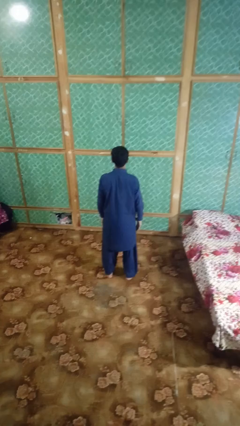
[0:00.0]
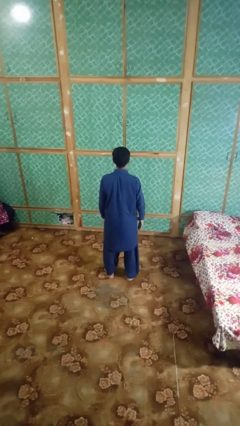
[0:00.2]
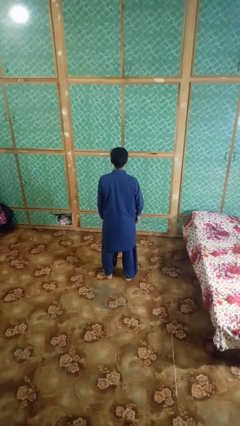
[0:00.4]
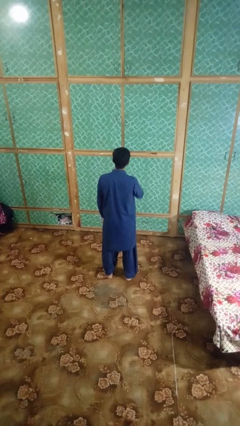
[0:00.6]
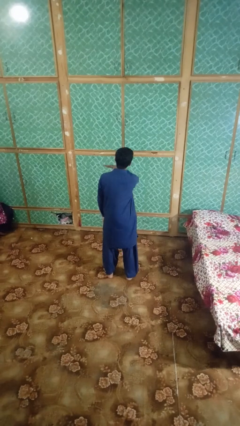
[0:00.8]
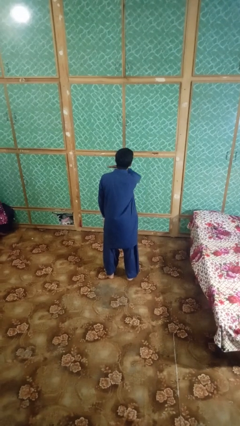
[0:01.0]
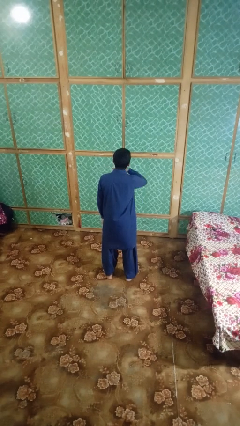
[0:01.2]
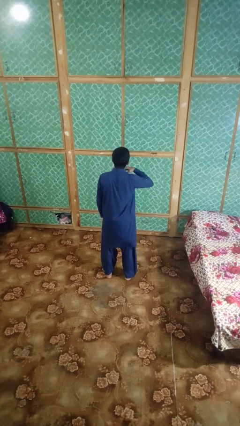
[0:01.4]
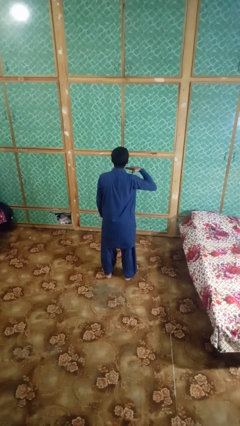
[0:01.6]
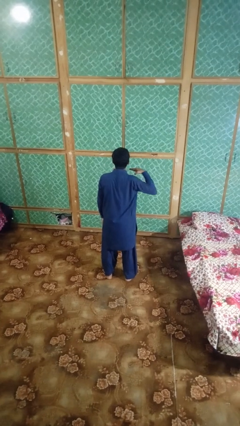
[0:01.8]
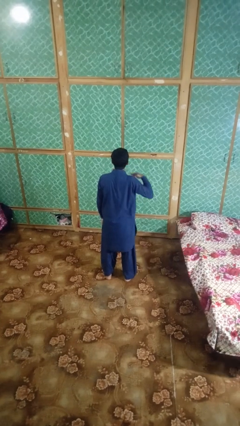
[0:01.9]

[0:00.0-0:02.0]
person gestures cut

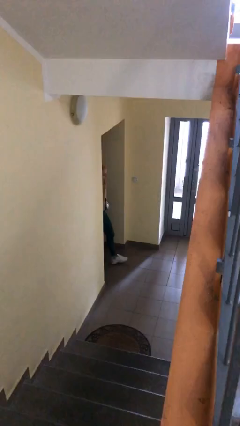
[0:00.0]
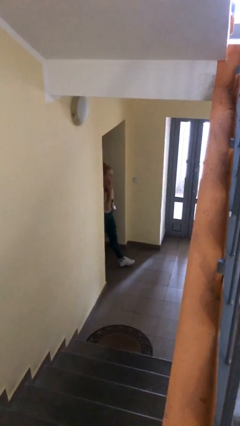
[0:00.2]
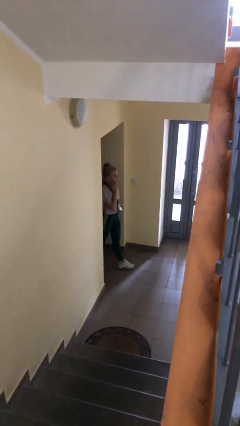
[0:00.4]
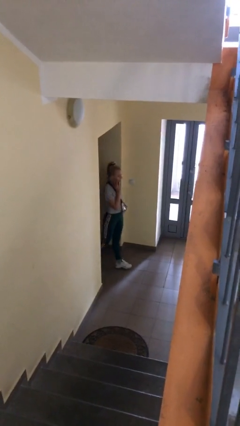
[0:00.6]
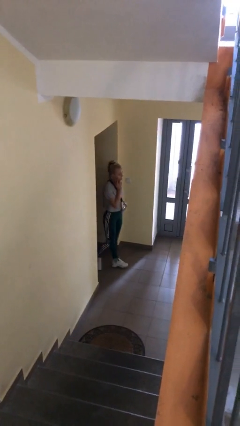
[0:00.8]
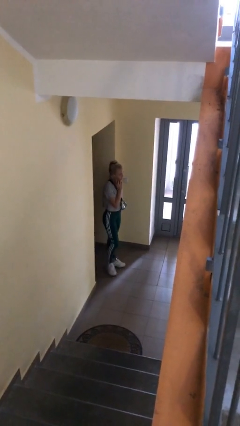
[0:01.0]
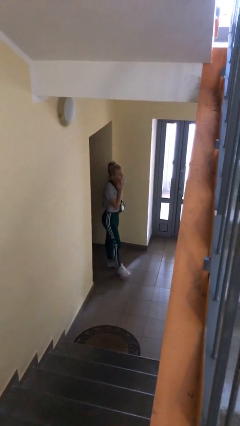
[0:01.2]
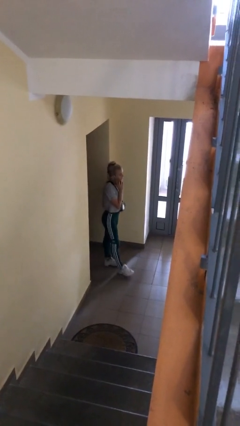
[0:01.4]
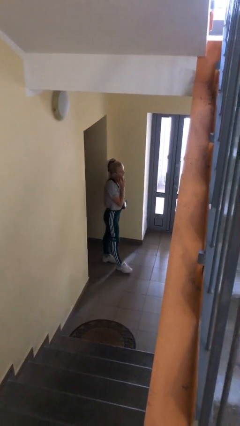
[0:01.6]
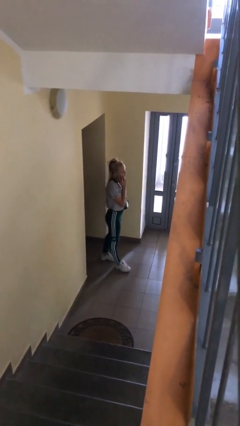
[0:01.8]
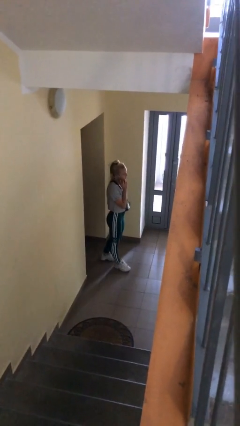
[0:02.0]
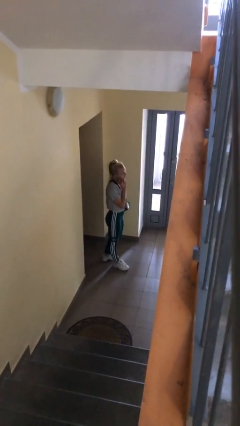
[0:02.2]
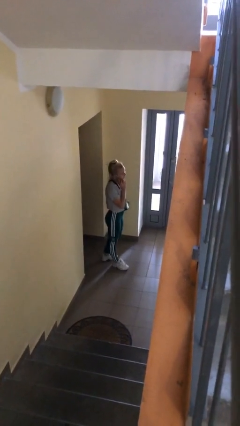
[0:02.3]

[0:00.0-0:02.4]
person enters scene through structure

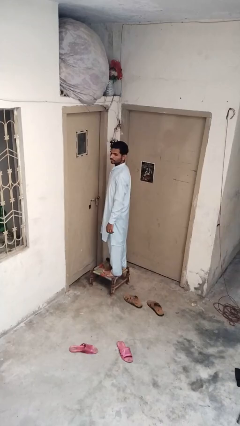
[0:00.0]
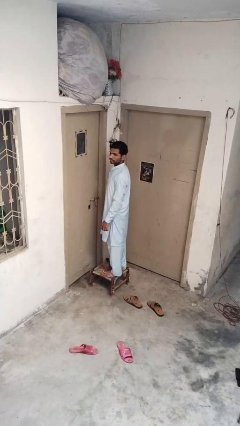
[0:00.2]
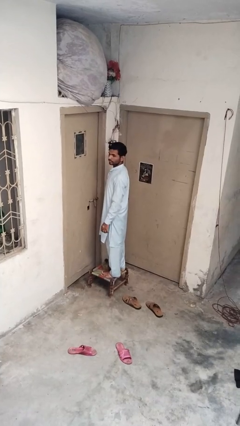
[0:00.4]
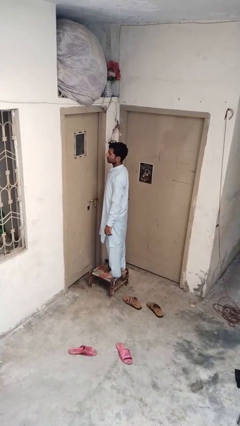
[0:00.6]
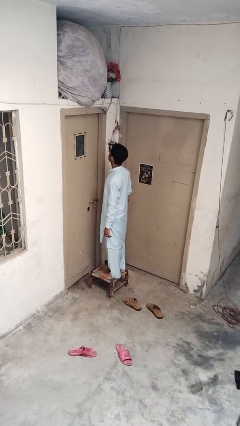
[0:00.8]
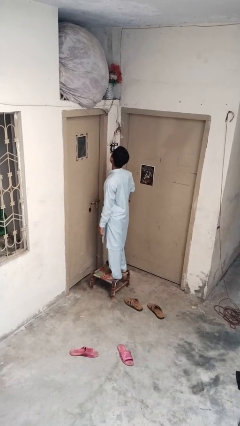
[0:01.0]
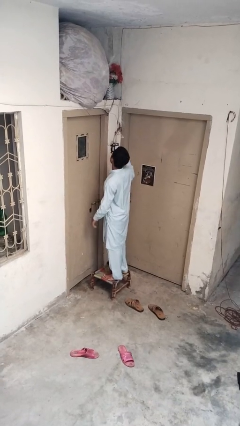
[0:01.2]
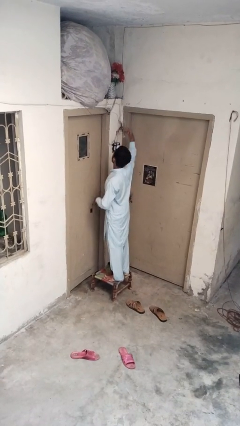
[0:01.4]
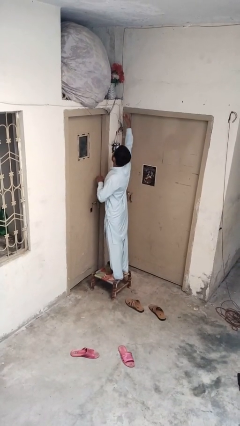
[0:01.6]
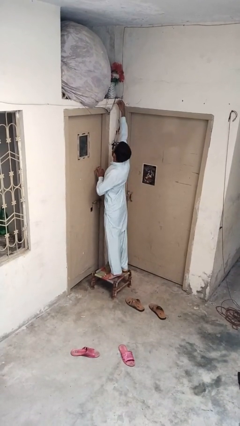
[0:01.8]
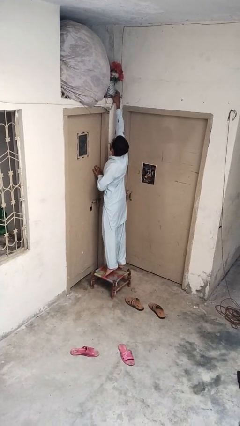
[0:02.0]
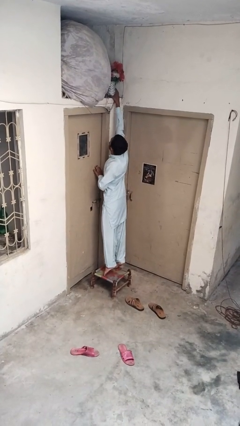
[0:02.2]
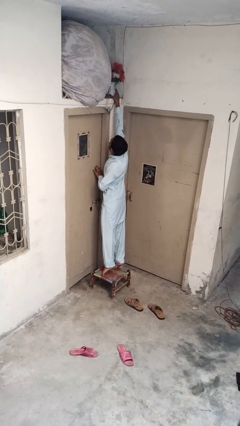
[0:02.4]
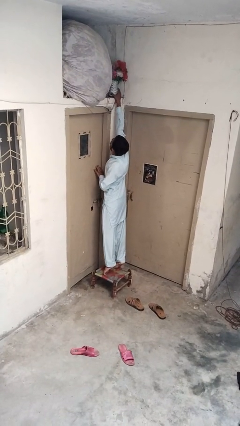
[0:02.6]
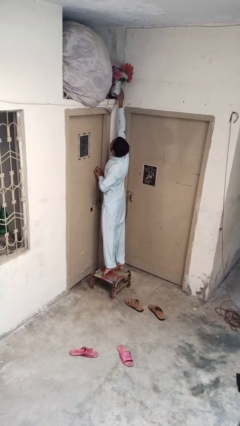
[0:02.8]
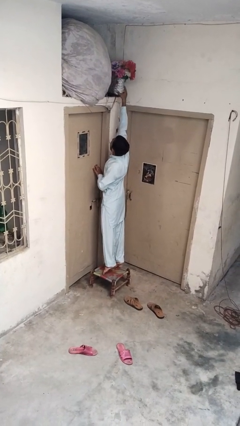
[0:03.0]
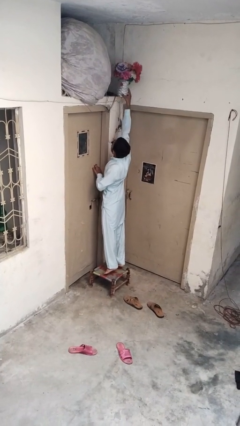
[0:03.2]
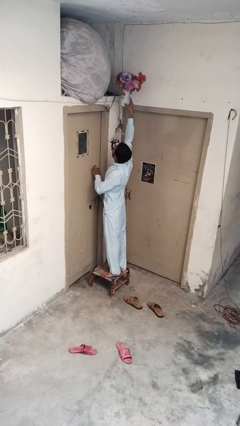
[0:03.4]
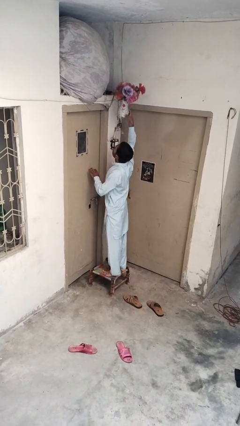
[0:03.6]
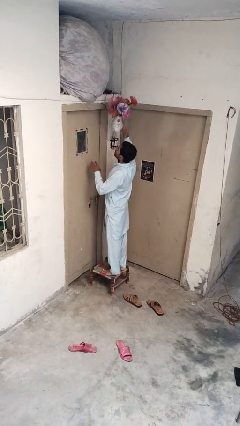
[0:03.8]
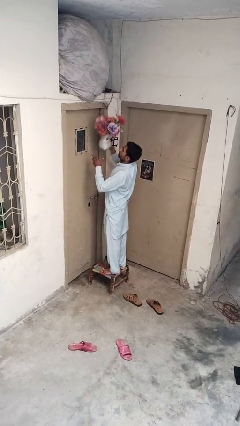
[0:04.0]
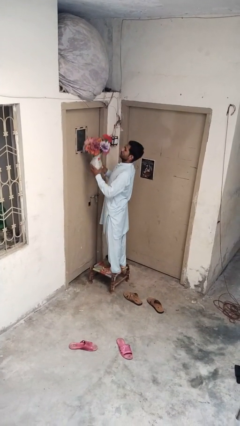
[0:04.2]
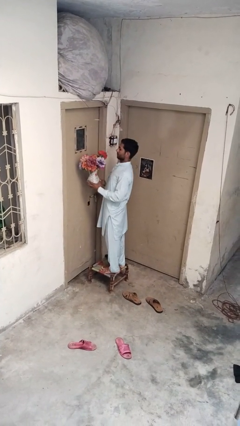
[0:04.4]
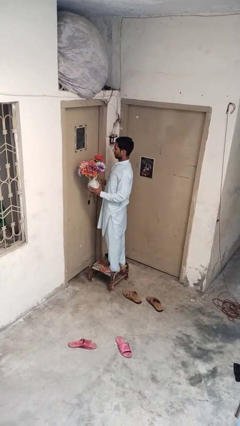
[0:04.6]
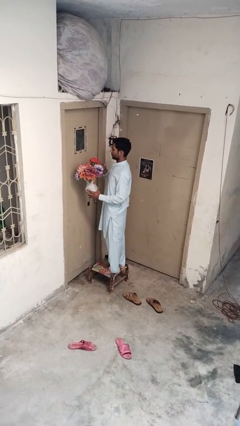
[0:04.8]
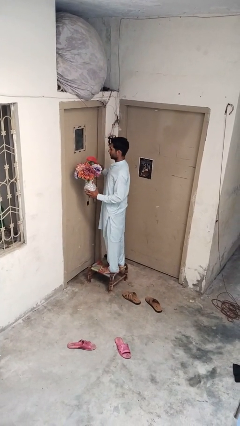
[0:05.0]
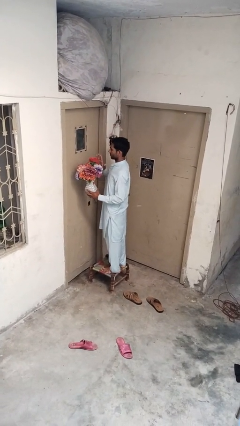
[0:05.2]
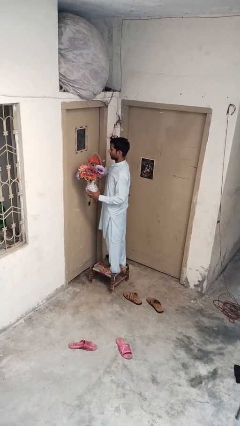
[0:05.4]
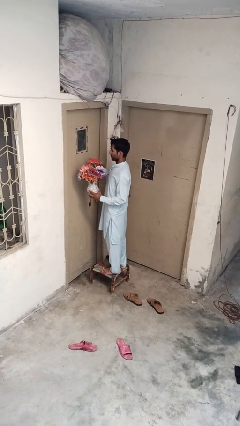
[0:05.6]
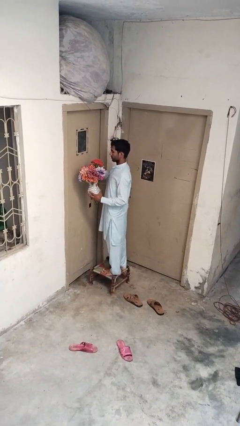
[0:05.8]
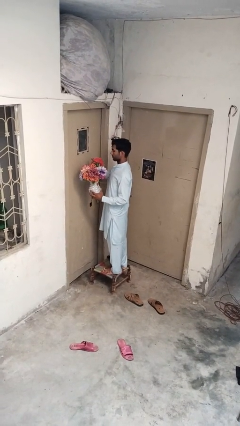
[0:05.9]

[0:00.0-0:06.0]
person picks up object from shelf

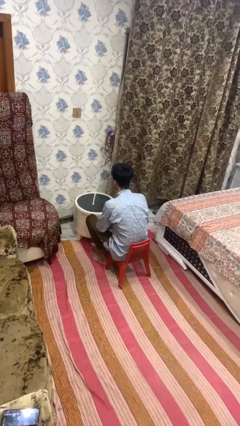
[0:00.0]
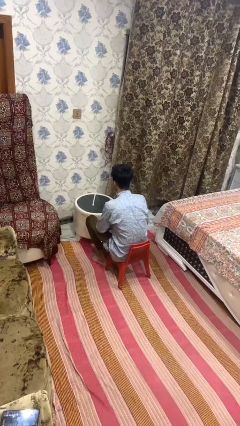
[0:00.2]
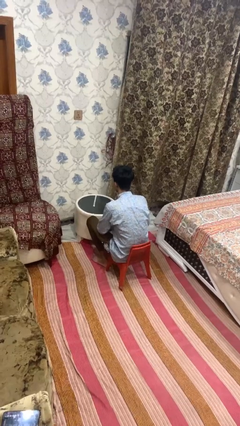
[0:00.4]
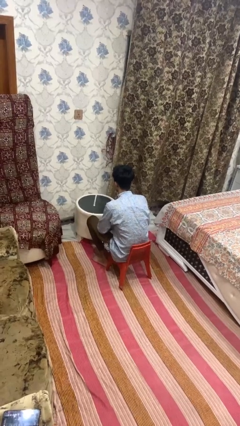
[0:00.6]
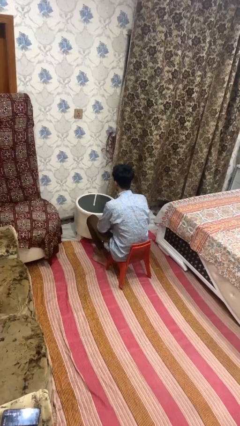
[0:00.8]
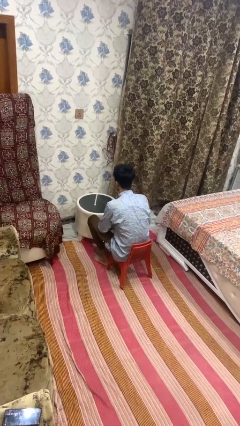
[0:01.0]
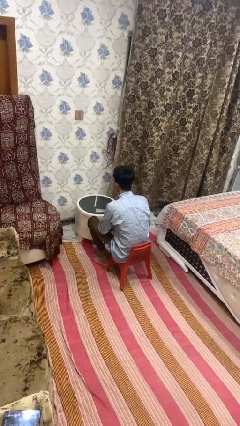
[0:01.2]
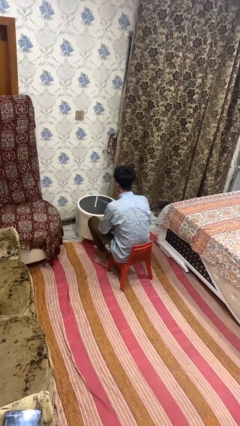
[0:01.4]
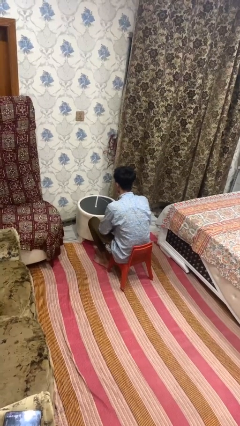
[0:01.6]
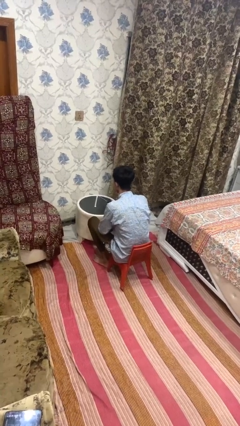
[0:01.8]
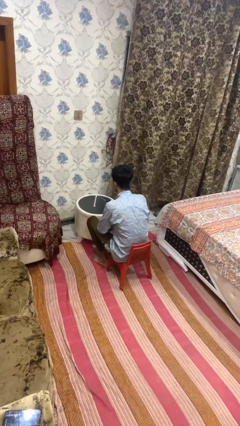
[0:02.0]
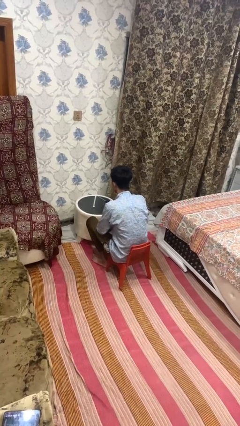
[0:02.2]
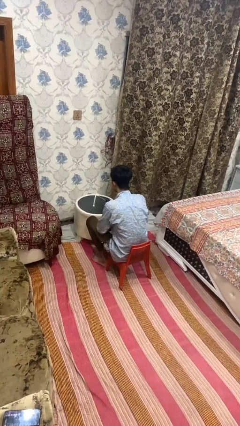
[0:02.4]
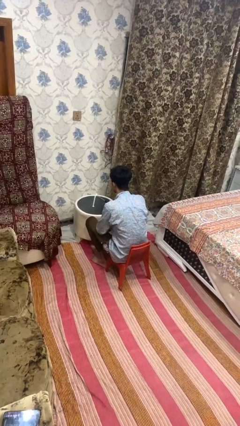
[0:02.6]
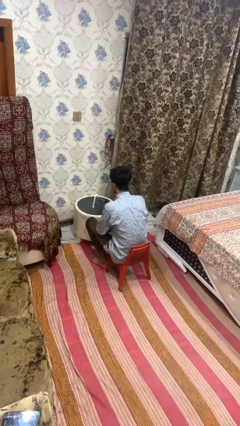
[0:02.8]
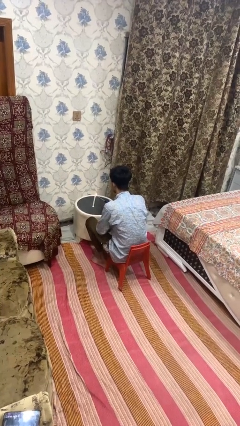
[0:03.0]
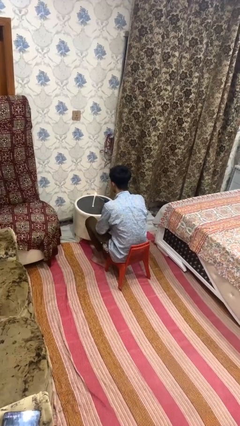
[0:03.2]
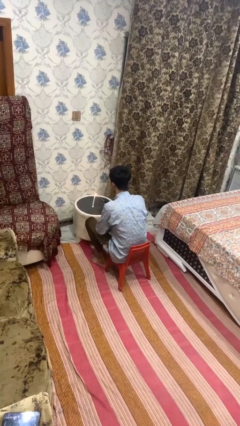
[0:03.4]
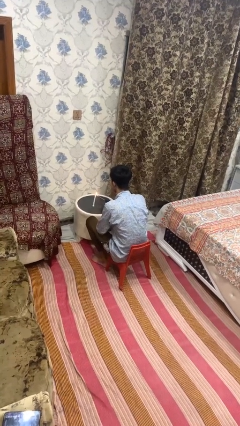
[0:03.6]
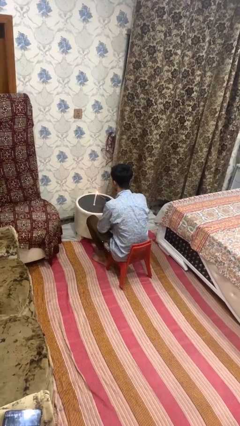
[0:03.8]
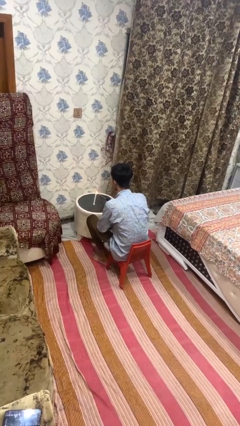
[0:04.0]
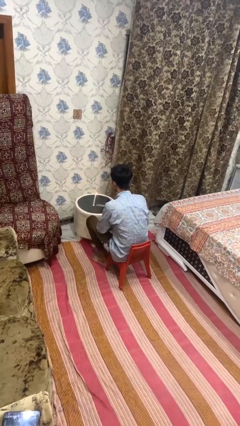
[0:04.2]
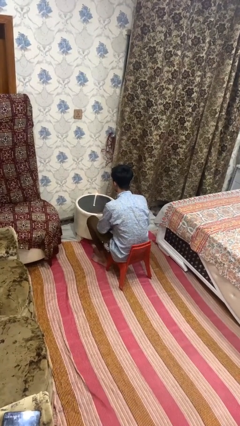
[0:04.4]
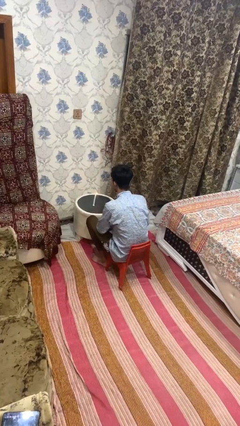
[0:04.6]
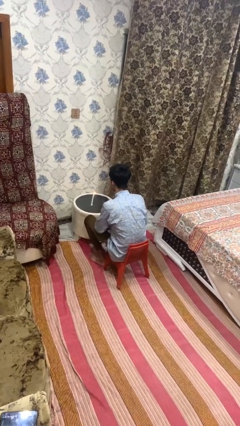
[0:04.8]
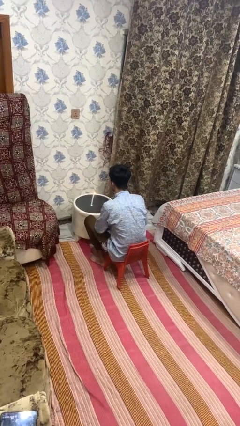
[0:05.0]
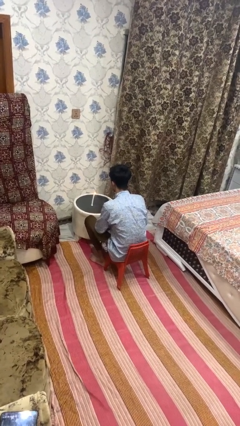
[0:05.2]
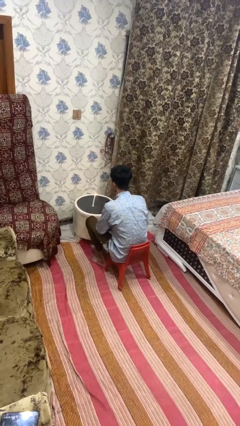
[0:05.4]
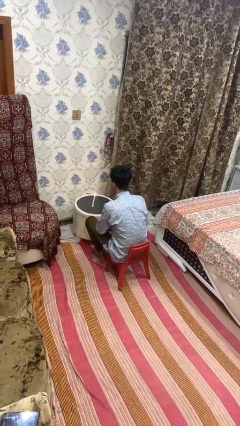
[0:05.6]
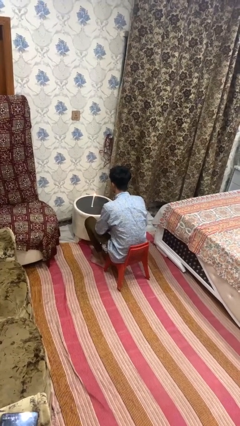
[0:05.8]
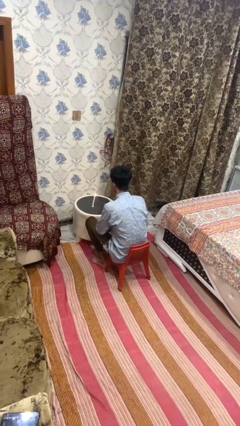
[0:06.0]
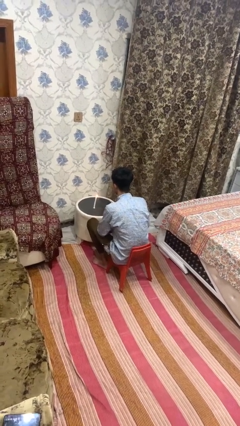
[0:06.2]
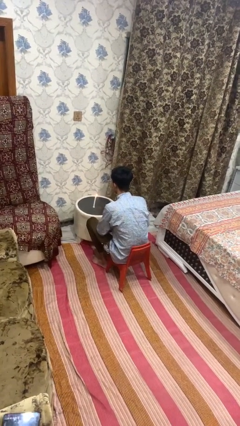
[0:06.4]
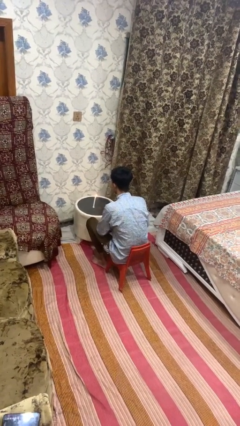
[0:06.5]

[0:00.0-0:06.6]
person lights candle

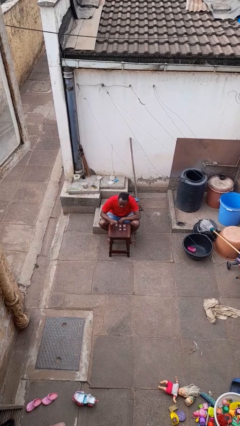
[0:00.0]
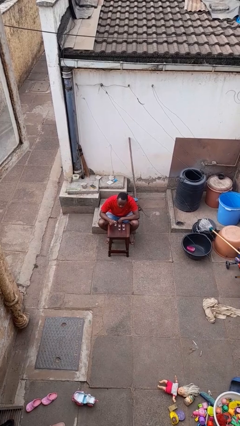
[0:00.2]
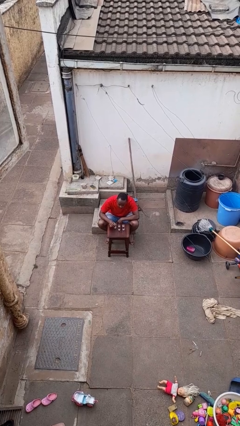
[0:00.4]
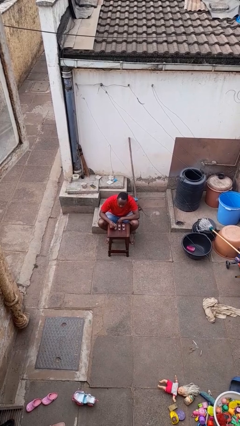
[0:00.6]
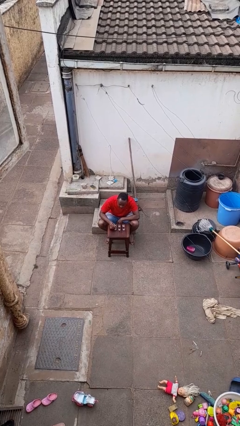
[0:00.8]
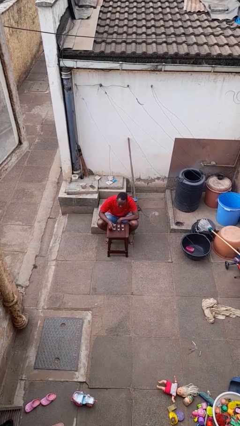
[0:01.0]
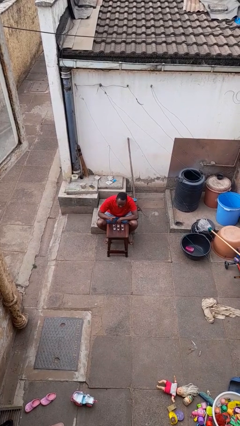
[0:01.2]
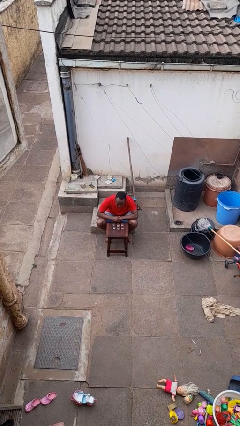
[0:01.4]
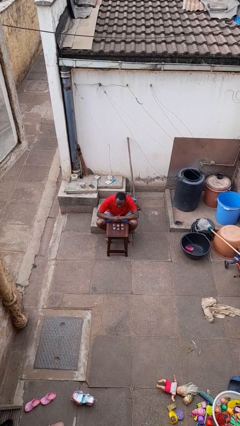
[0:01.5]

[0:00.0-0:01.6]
person puts down object on table
